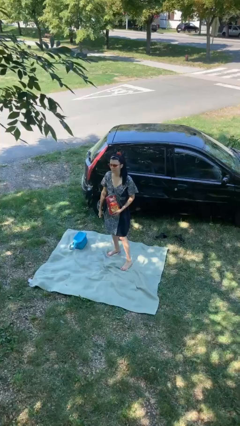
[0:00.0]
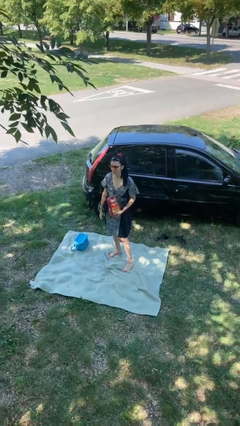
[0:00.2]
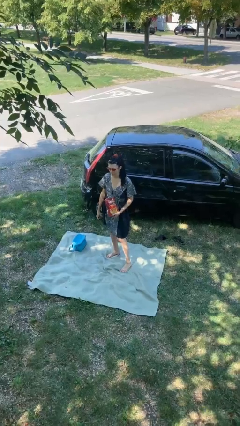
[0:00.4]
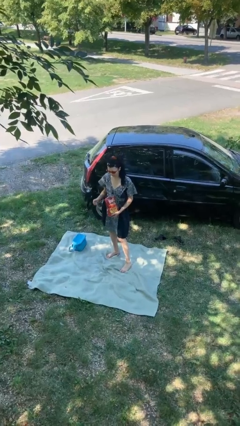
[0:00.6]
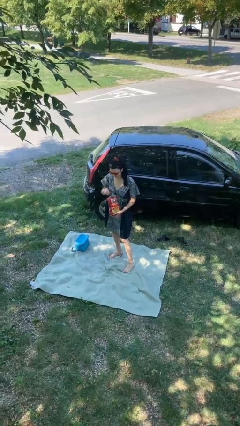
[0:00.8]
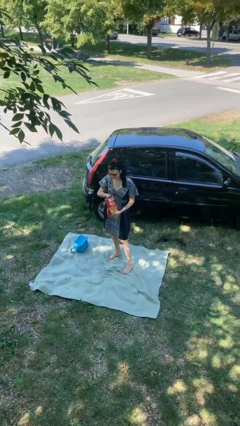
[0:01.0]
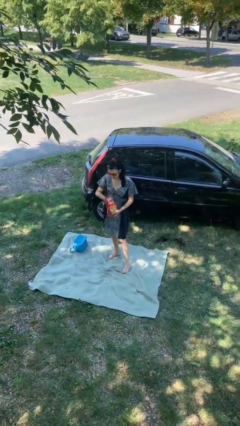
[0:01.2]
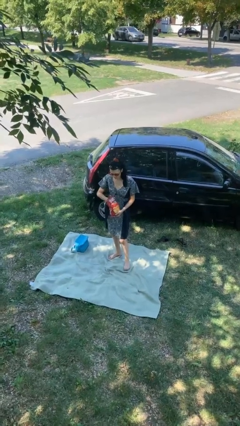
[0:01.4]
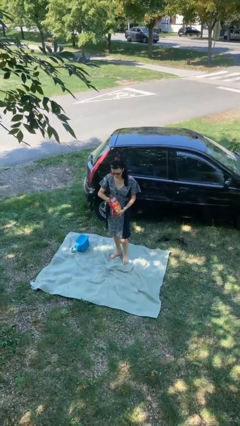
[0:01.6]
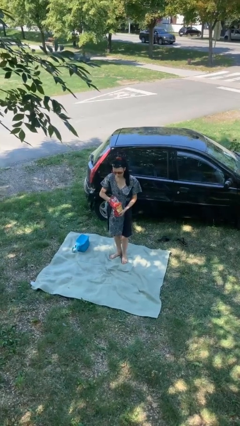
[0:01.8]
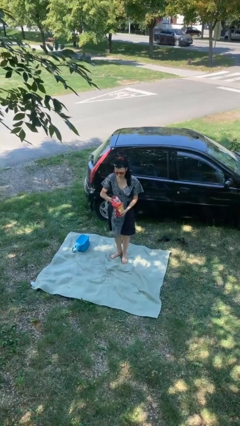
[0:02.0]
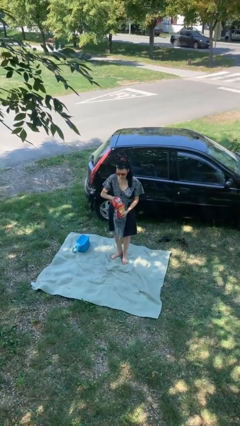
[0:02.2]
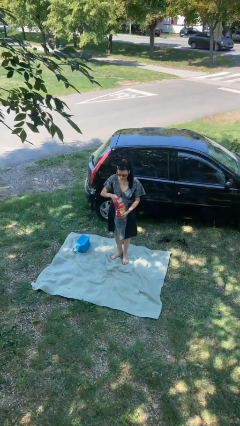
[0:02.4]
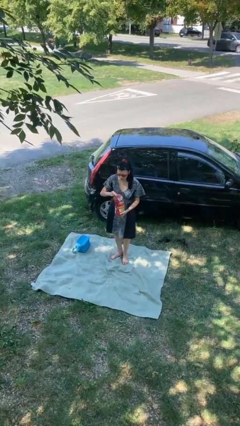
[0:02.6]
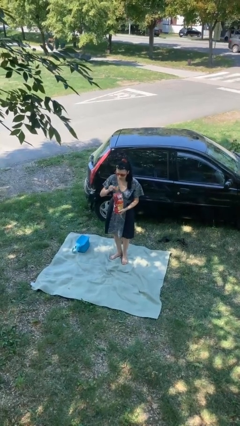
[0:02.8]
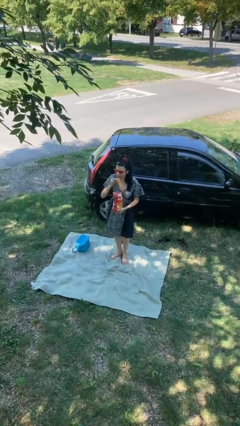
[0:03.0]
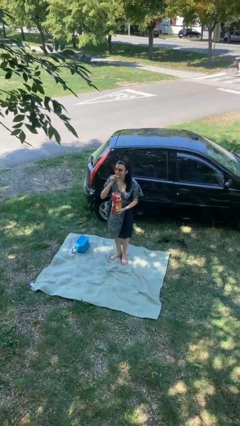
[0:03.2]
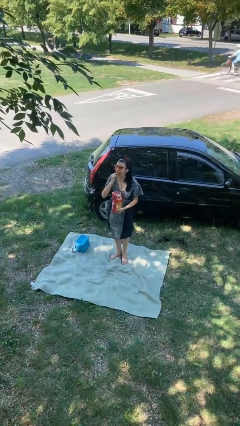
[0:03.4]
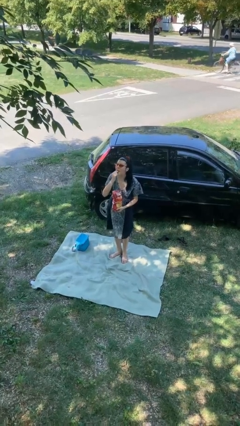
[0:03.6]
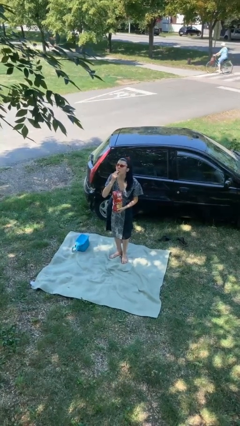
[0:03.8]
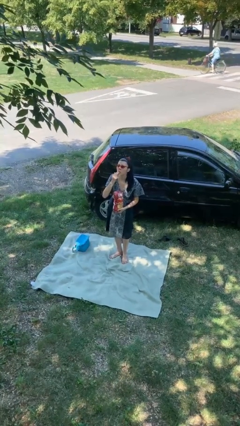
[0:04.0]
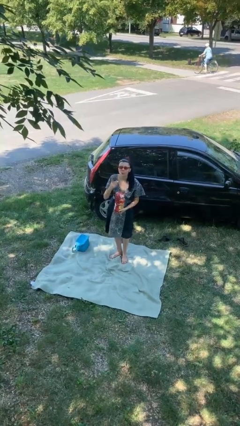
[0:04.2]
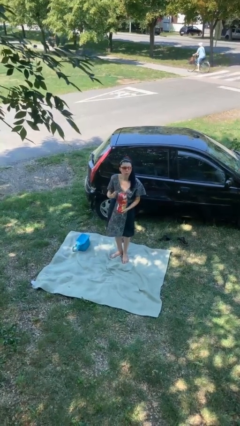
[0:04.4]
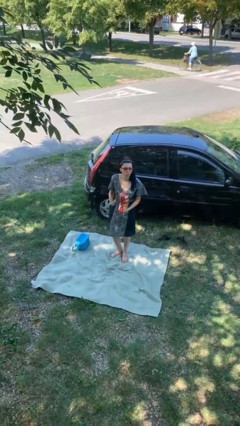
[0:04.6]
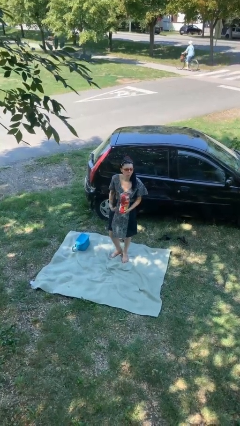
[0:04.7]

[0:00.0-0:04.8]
person eats snack from bag

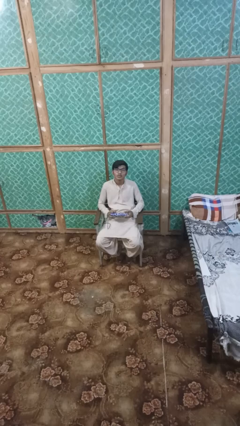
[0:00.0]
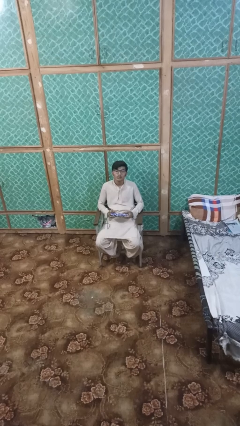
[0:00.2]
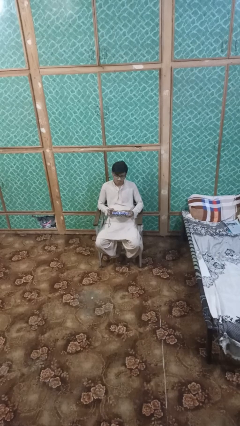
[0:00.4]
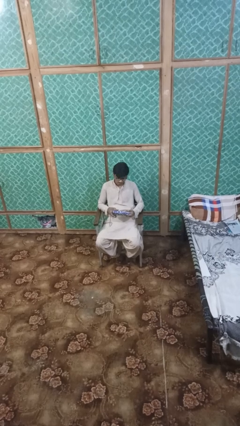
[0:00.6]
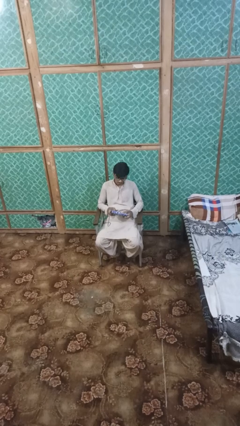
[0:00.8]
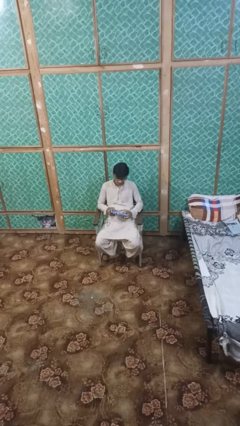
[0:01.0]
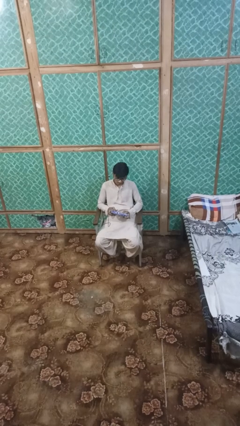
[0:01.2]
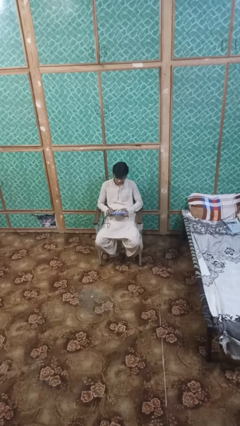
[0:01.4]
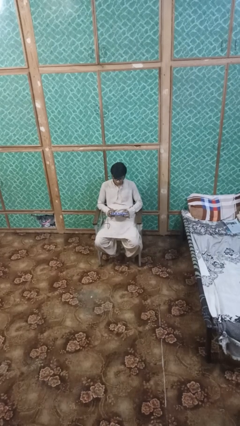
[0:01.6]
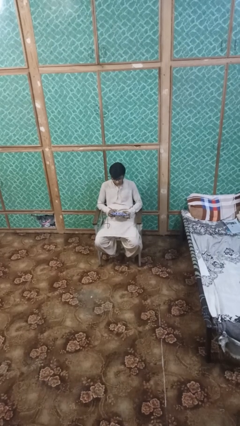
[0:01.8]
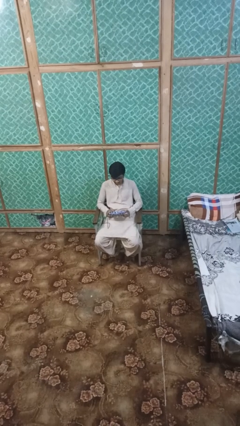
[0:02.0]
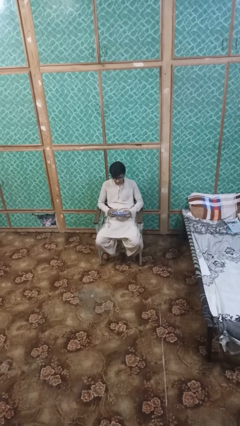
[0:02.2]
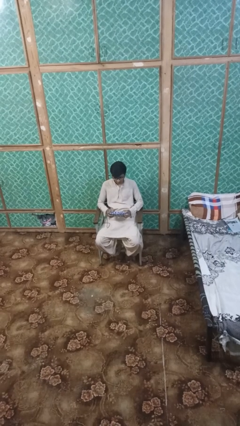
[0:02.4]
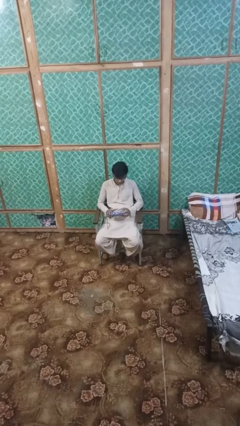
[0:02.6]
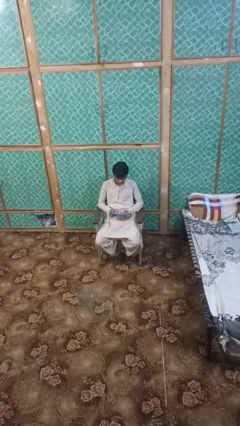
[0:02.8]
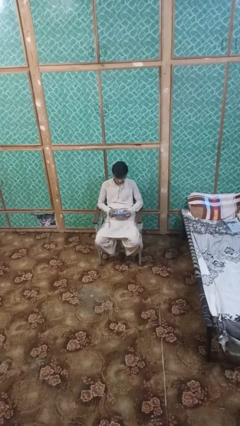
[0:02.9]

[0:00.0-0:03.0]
person interacts with handheld game

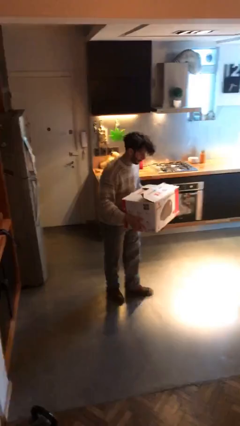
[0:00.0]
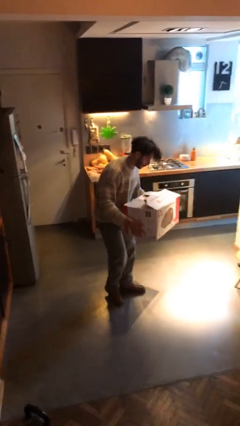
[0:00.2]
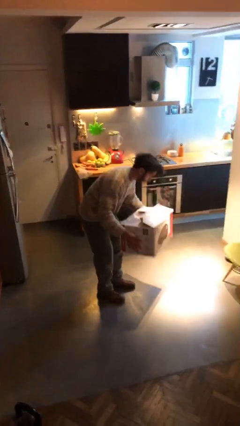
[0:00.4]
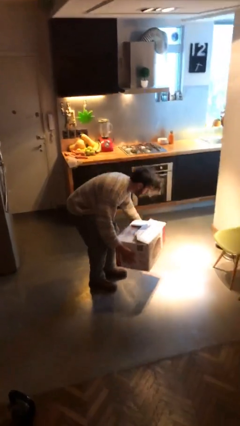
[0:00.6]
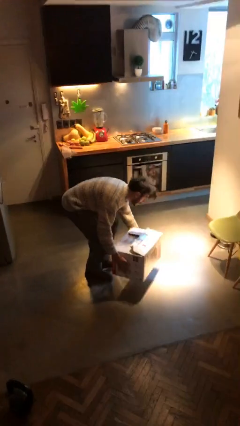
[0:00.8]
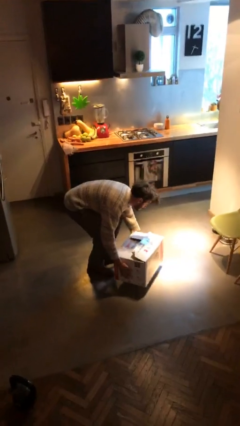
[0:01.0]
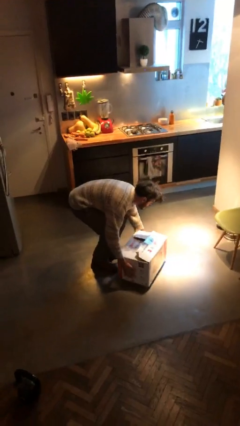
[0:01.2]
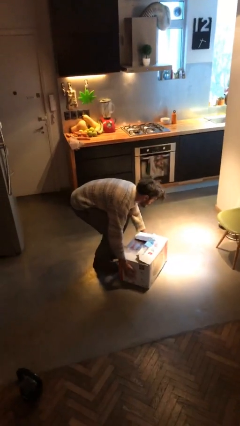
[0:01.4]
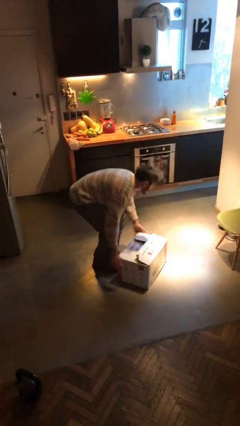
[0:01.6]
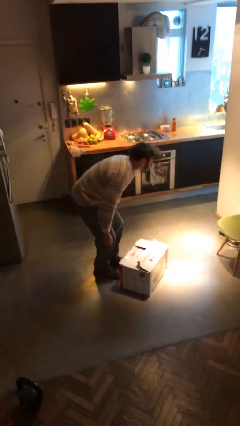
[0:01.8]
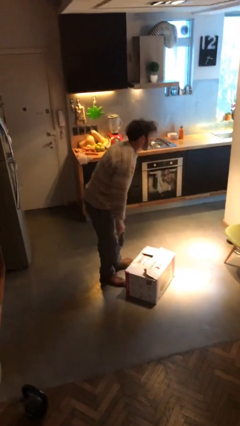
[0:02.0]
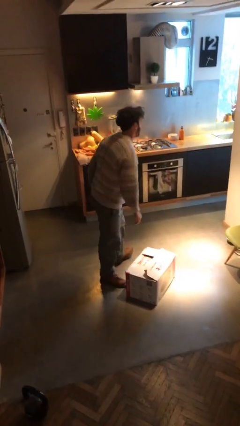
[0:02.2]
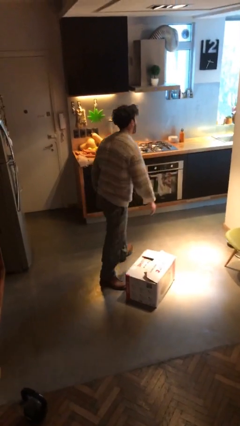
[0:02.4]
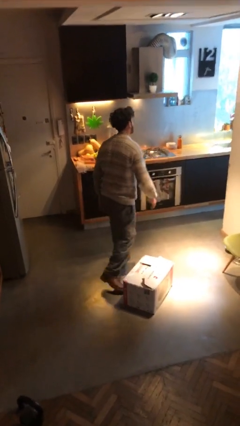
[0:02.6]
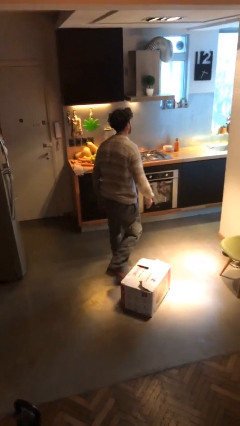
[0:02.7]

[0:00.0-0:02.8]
person puts down object on floor

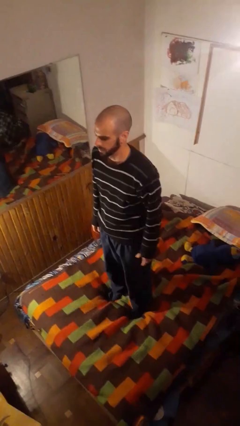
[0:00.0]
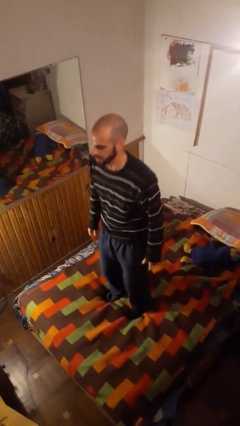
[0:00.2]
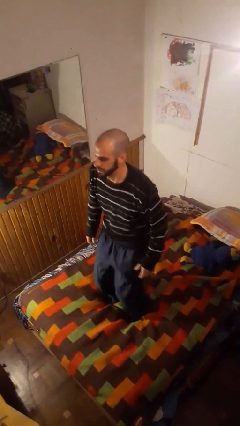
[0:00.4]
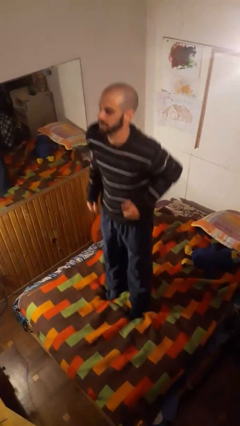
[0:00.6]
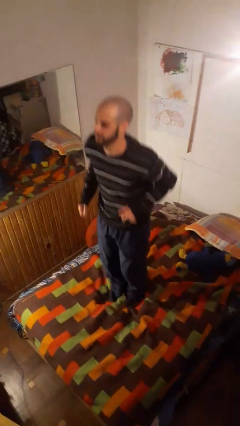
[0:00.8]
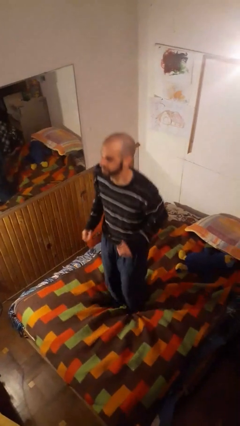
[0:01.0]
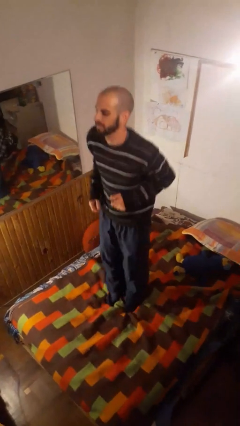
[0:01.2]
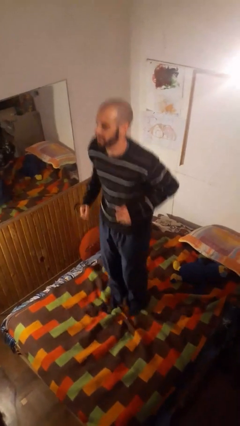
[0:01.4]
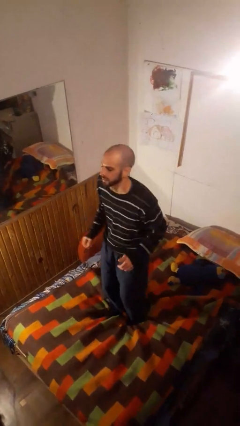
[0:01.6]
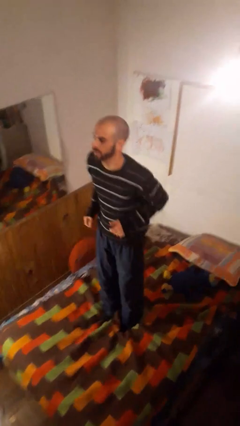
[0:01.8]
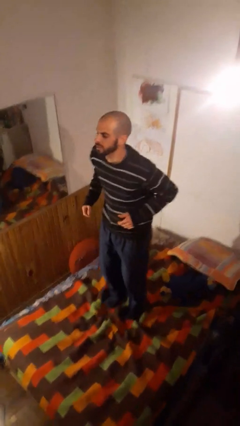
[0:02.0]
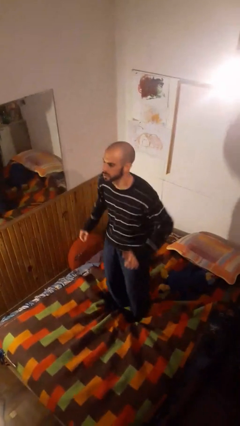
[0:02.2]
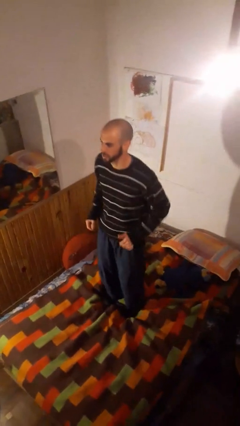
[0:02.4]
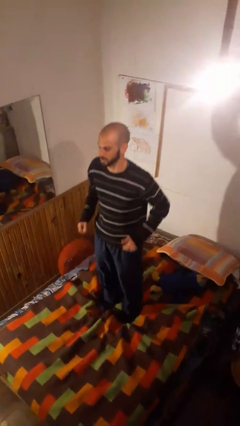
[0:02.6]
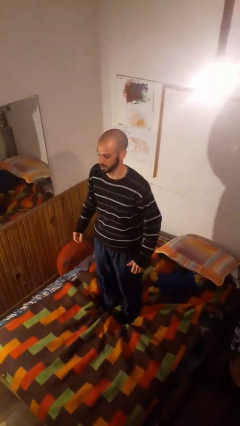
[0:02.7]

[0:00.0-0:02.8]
person jumps on bed

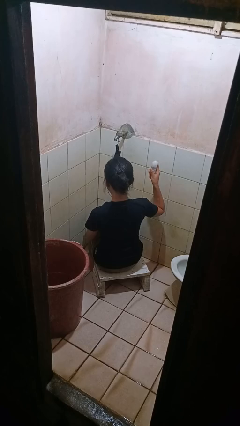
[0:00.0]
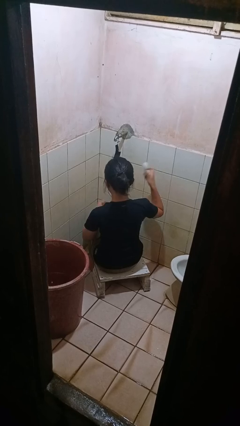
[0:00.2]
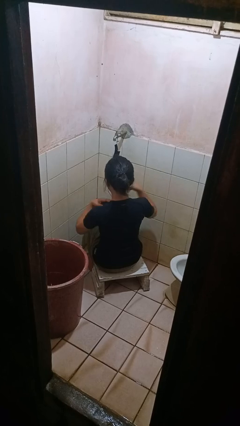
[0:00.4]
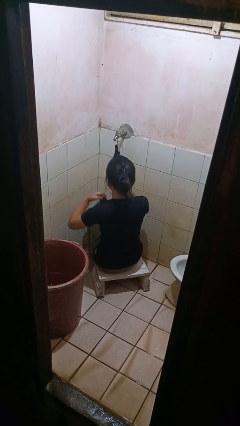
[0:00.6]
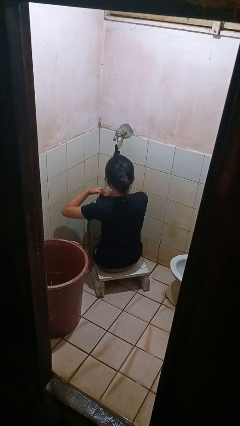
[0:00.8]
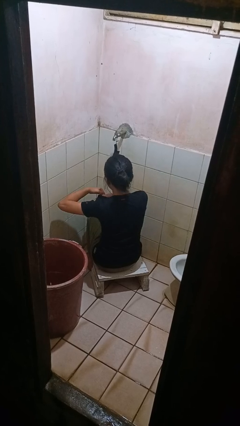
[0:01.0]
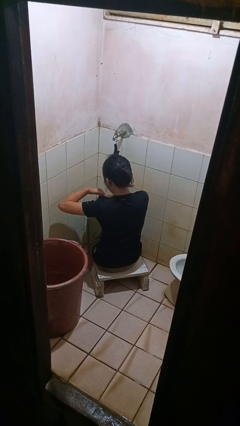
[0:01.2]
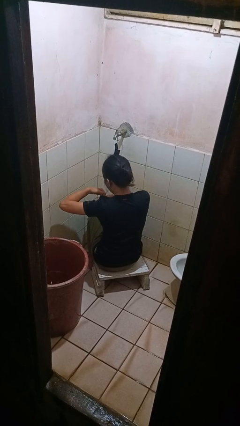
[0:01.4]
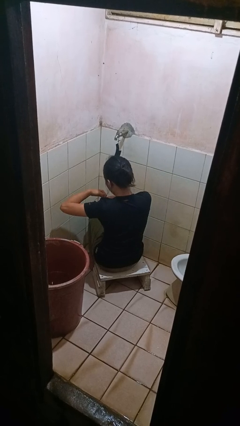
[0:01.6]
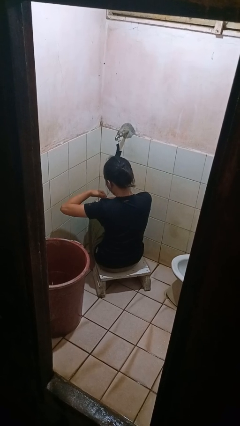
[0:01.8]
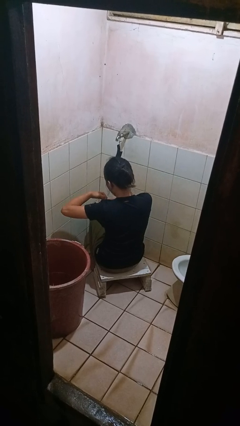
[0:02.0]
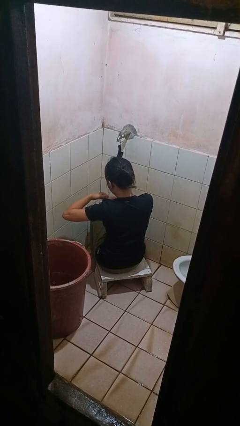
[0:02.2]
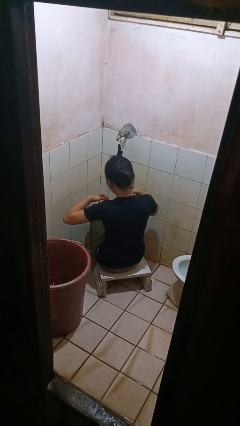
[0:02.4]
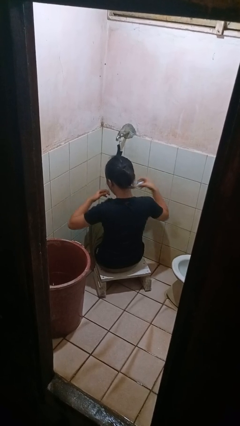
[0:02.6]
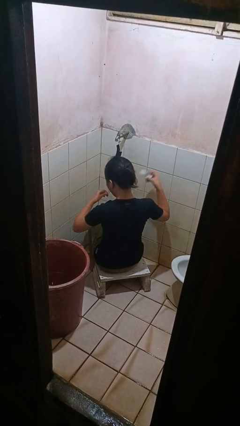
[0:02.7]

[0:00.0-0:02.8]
person applies deodorant

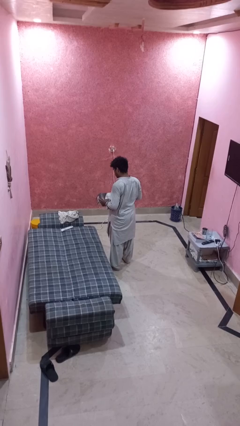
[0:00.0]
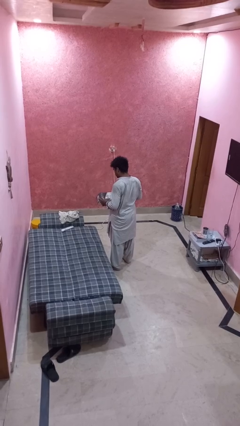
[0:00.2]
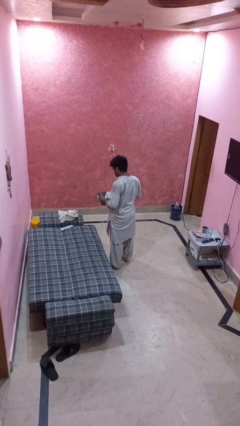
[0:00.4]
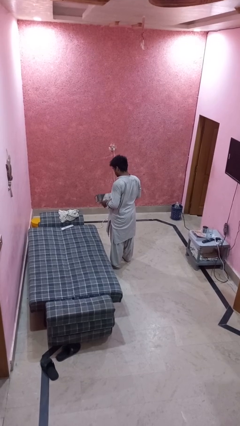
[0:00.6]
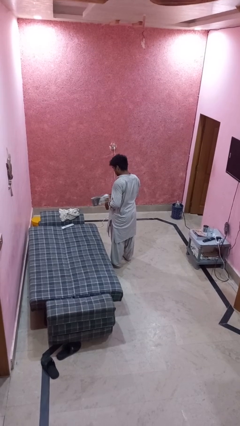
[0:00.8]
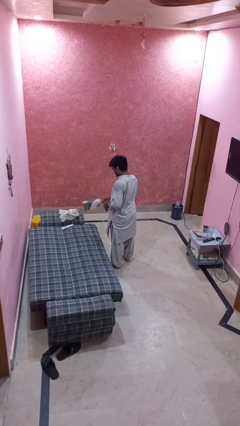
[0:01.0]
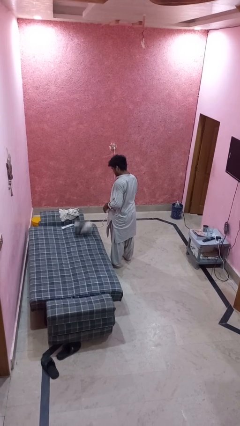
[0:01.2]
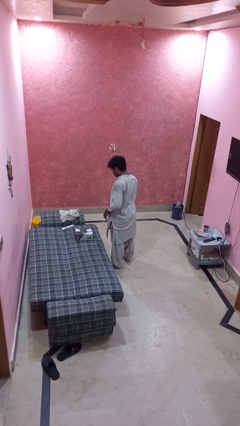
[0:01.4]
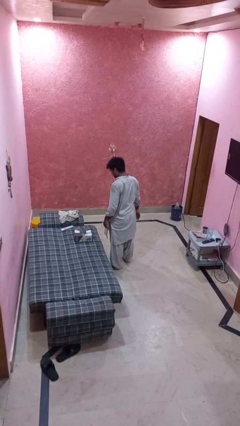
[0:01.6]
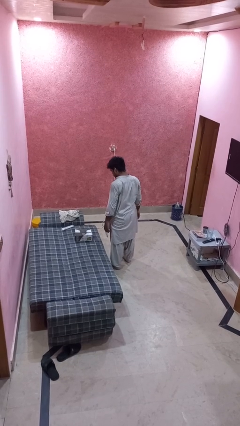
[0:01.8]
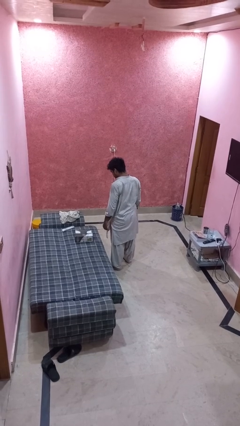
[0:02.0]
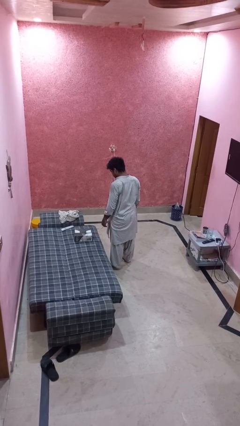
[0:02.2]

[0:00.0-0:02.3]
person throws object on bed
